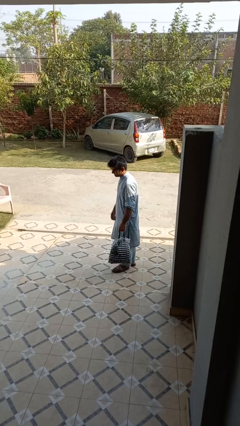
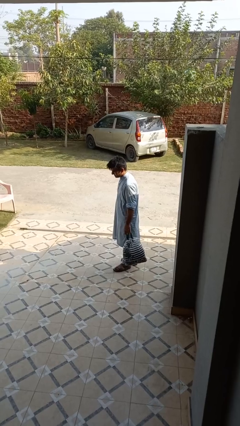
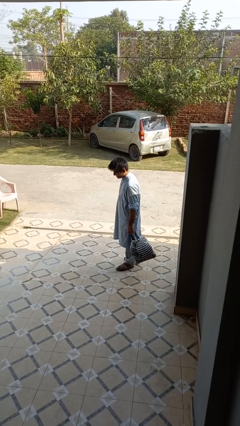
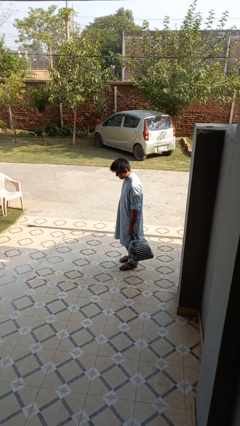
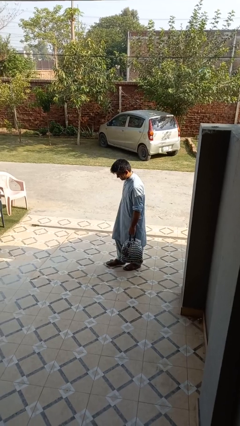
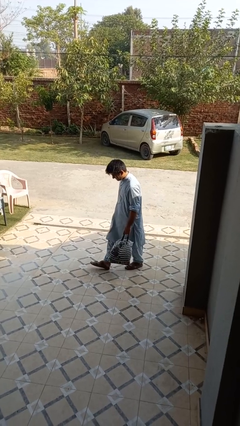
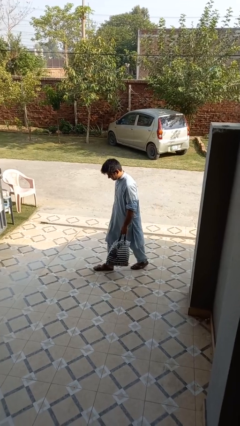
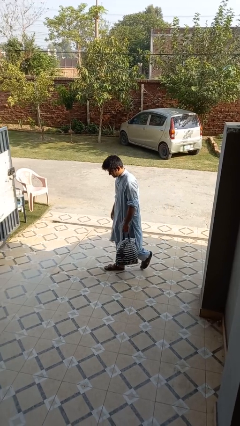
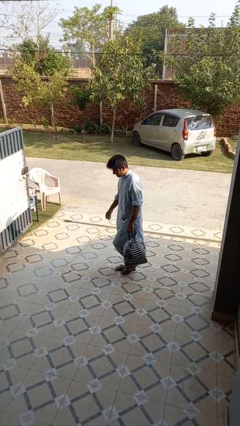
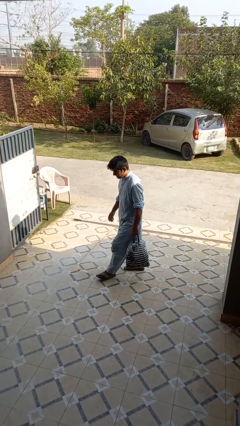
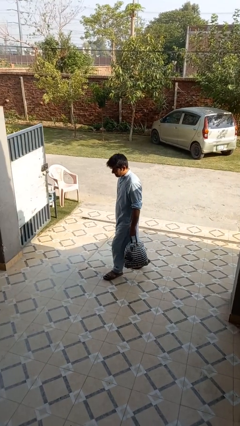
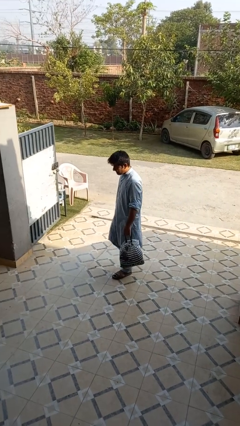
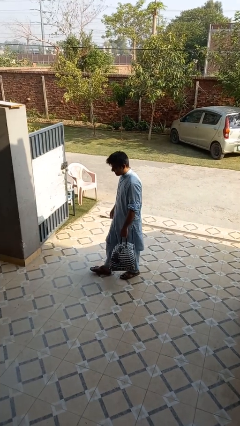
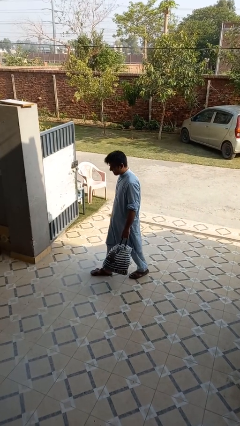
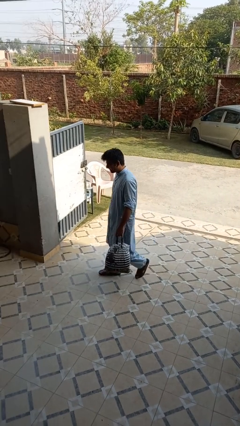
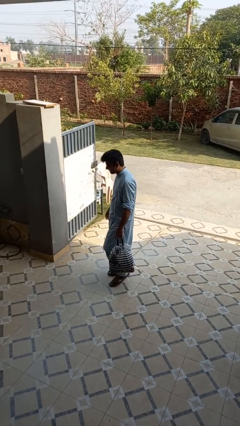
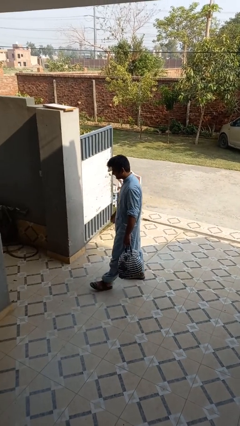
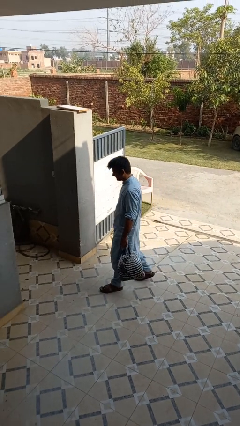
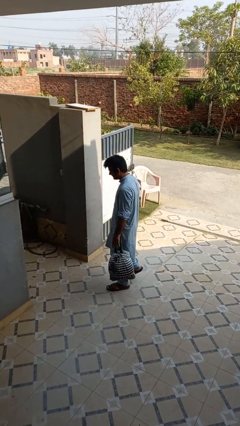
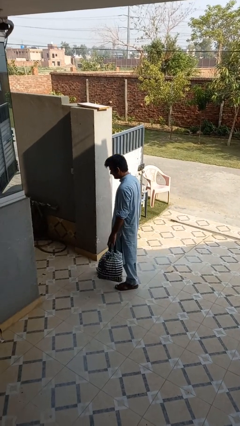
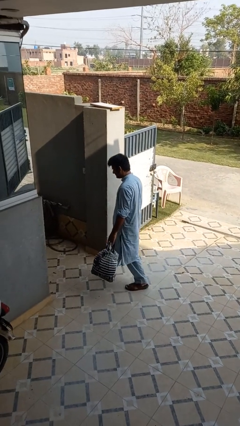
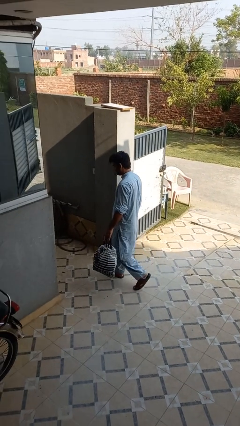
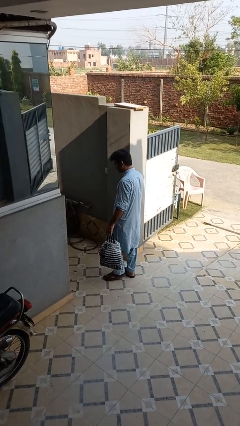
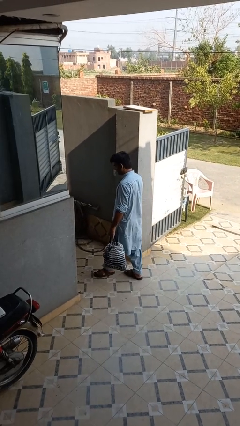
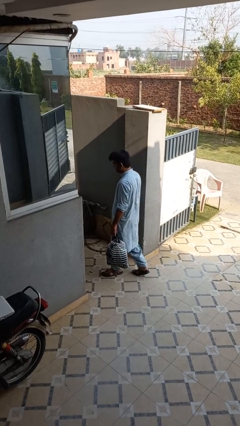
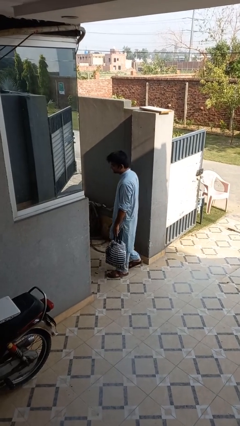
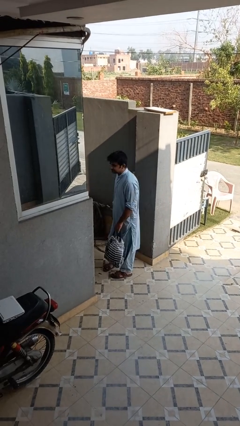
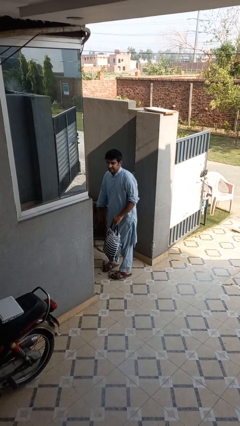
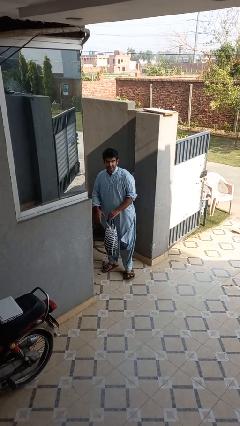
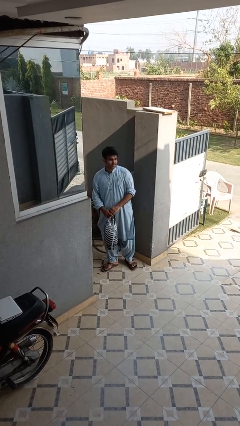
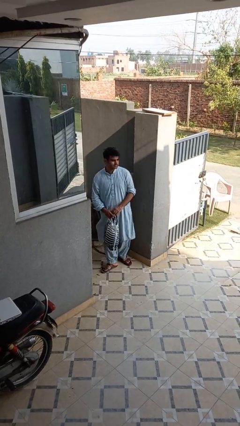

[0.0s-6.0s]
person carries groceries

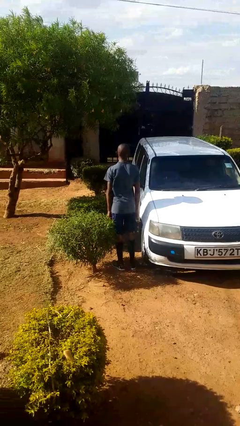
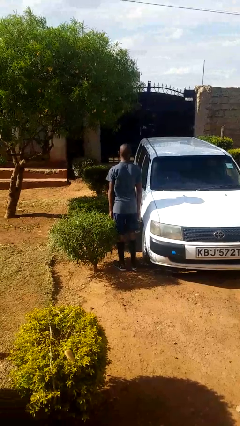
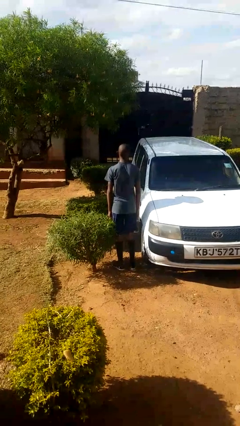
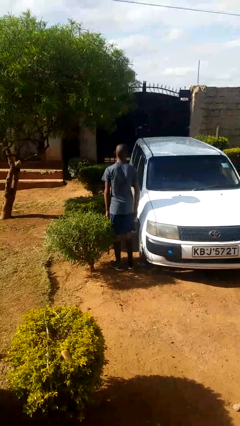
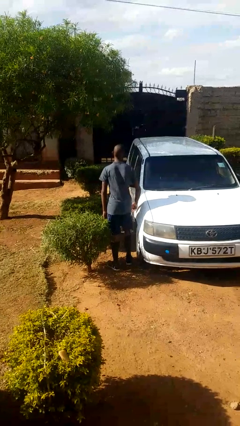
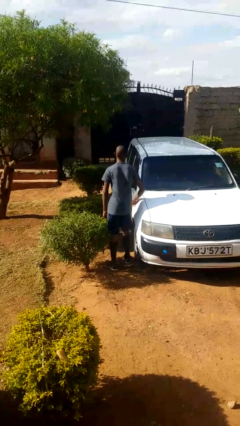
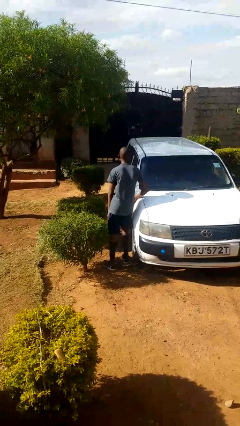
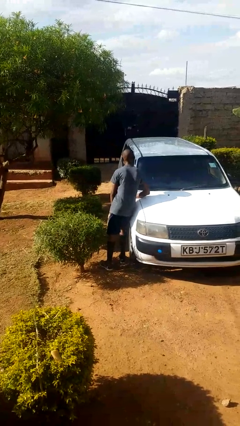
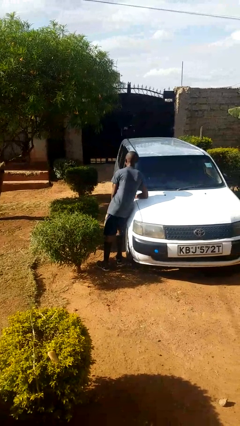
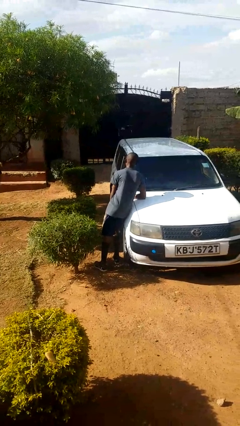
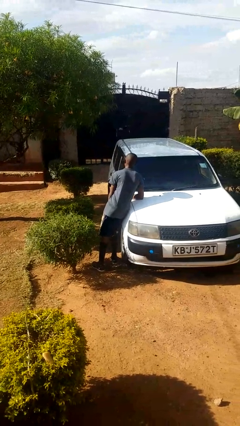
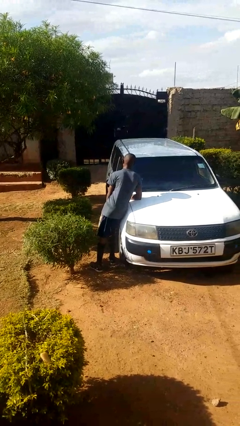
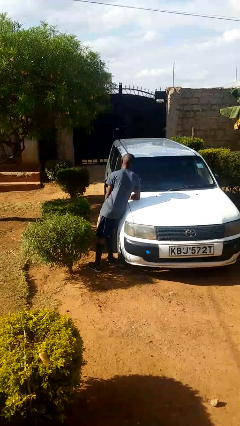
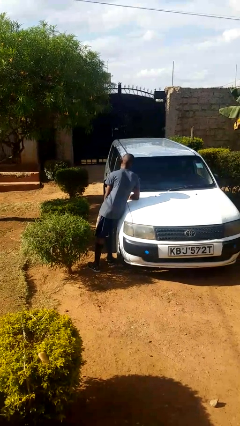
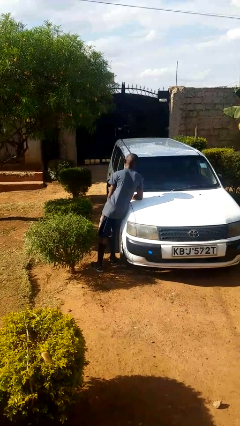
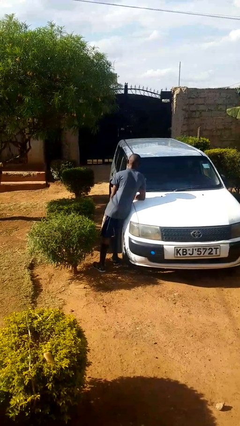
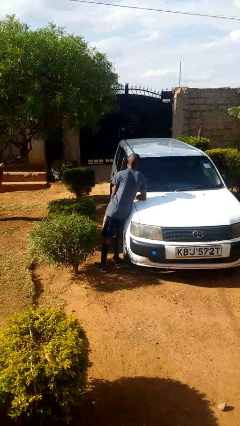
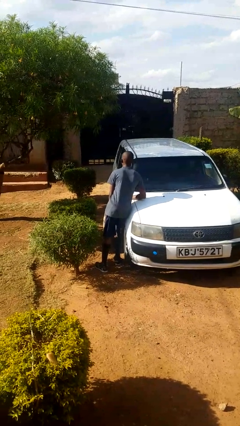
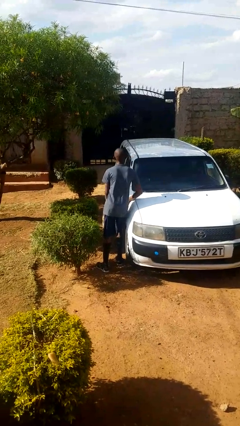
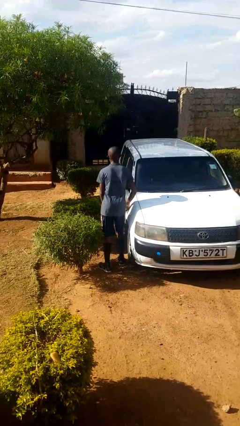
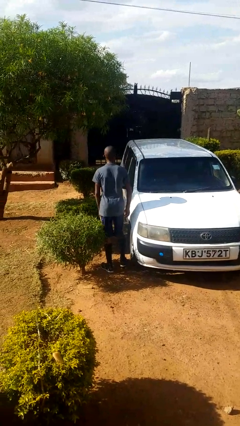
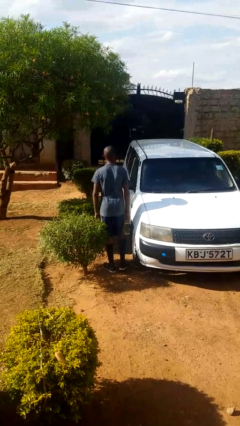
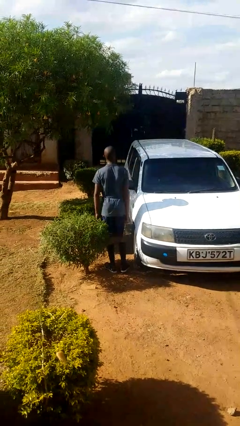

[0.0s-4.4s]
person leans against car

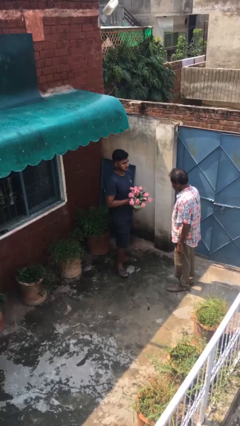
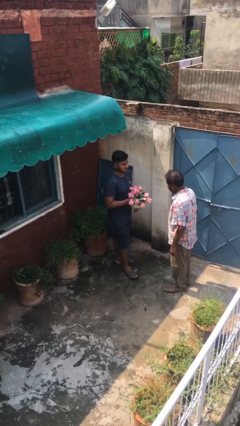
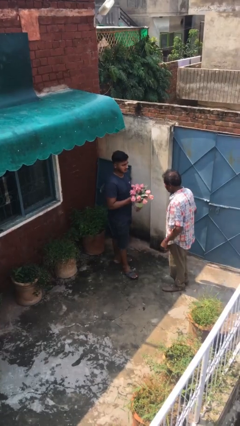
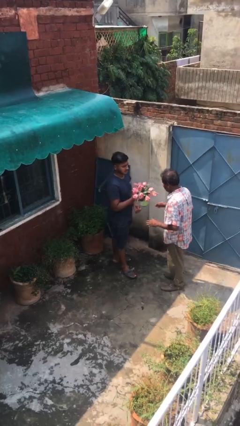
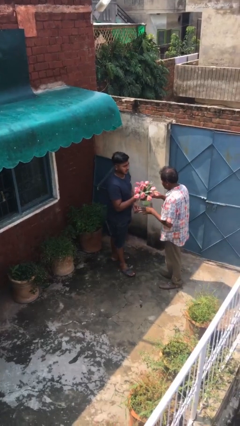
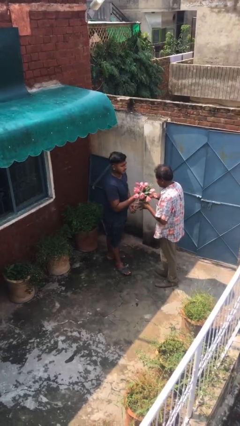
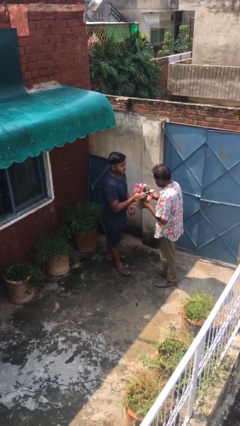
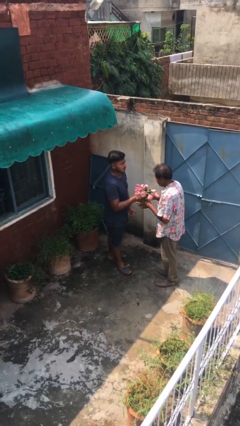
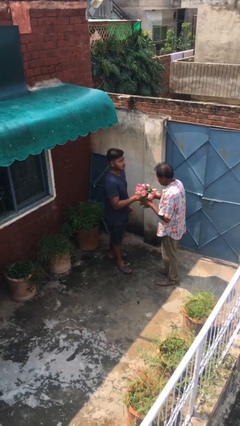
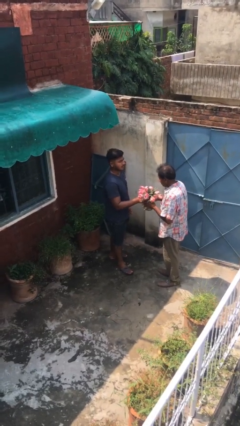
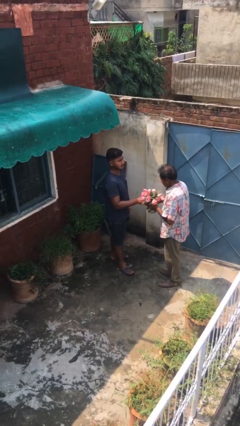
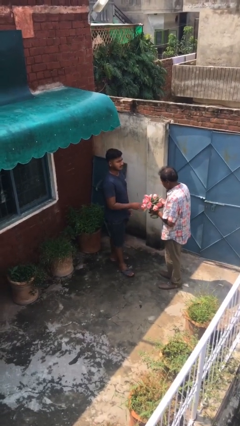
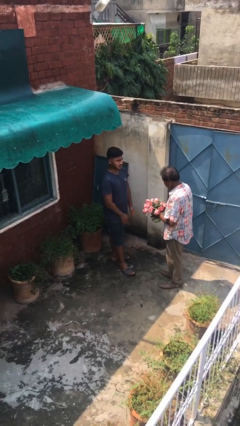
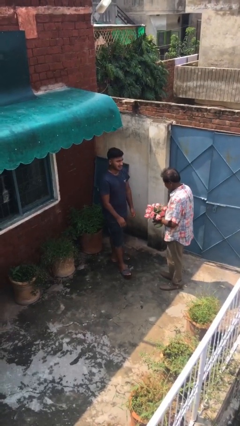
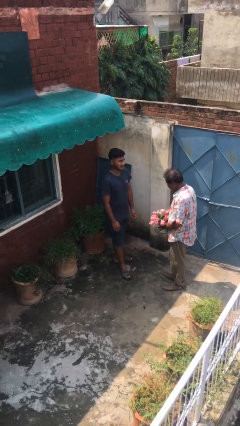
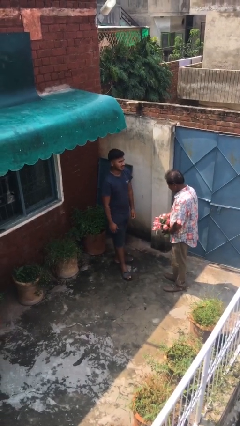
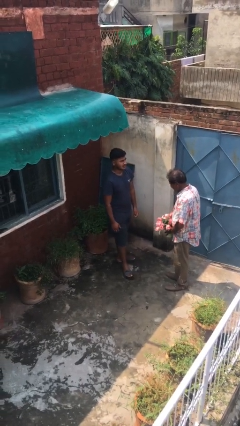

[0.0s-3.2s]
person transfers object to person

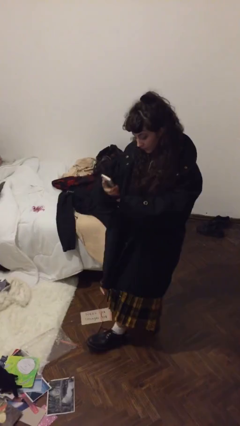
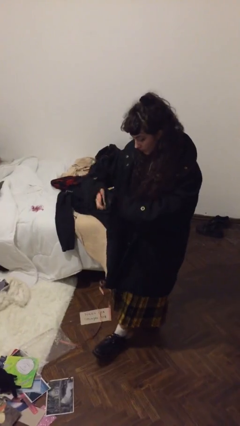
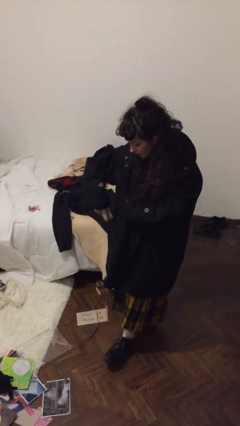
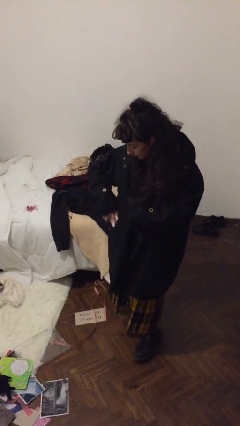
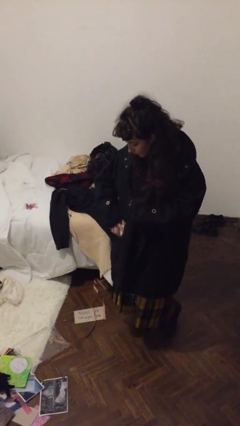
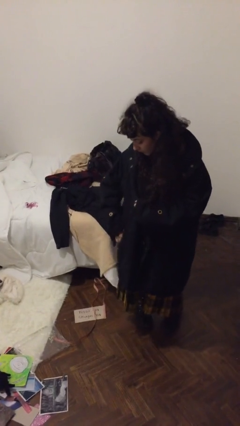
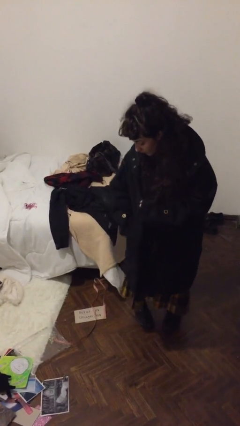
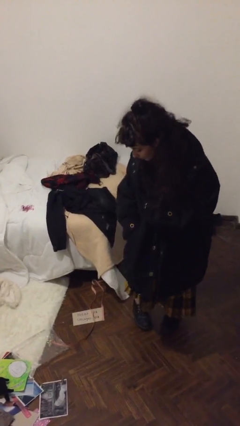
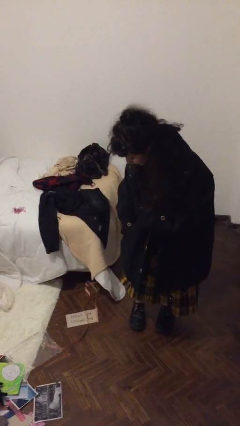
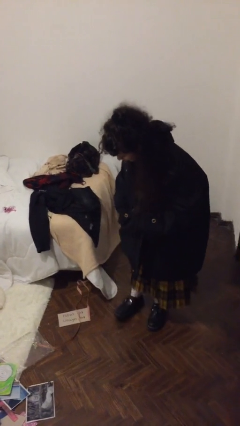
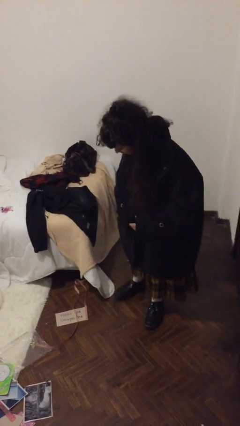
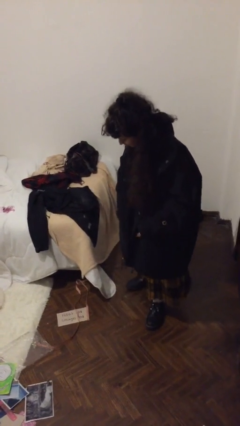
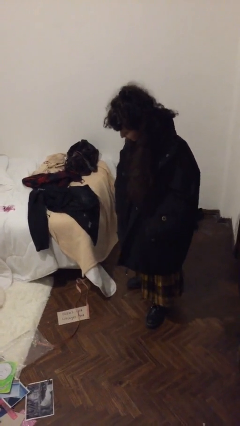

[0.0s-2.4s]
person puts phone into pocket

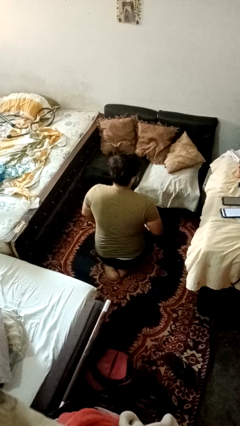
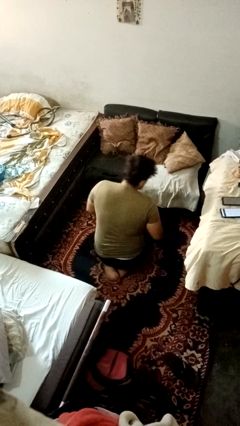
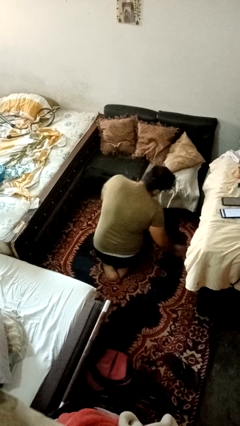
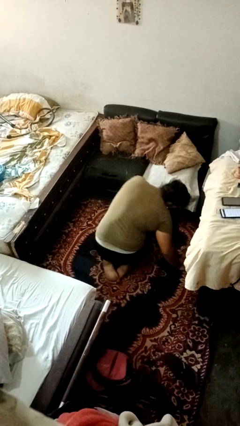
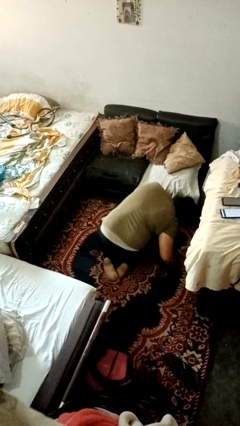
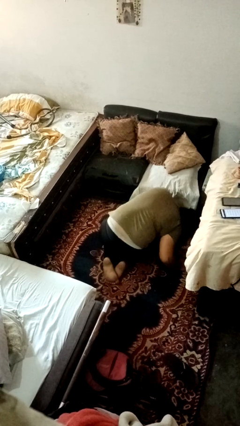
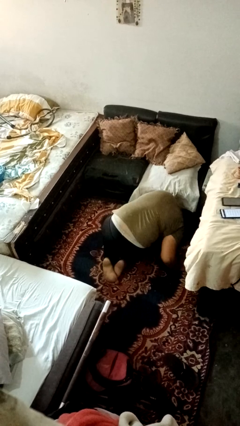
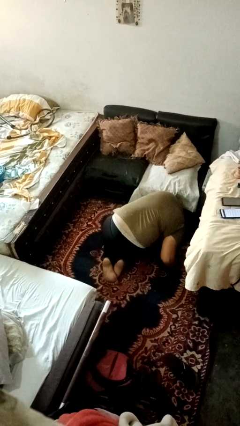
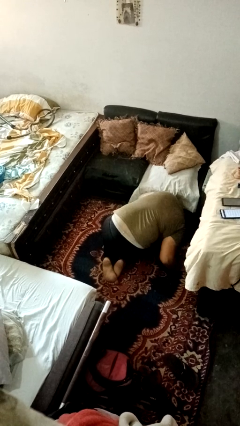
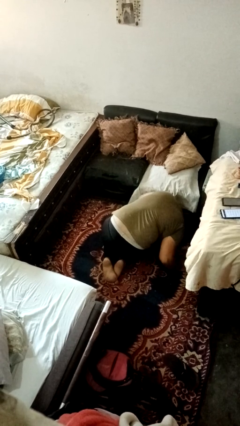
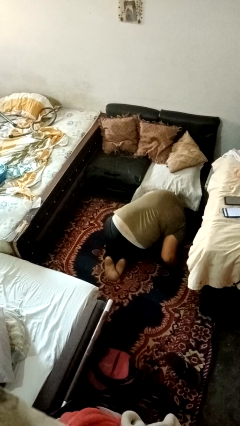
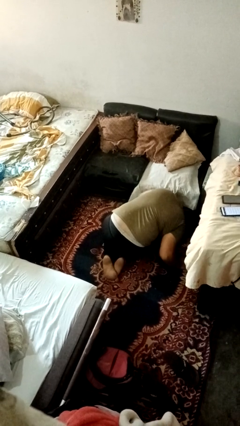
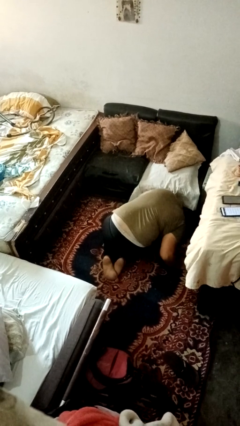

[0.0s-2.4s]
person searches under couch
